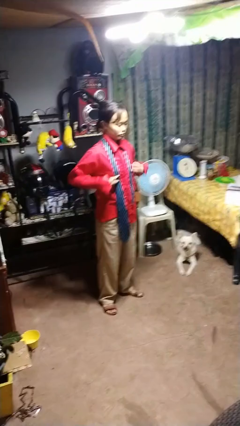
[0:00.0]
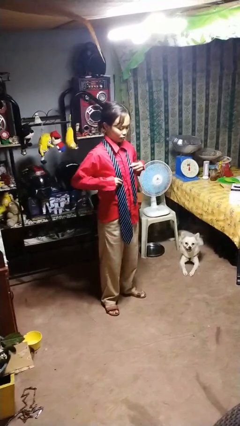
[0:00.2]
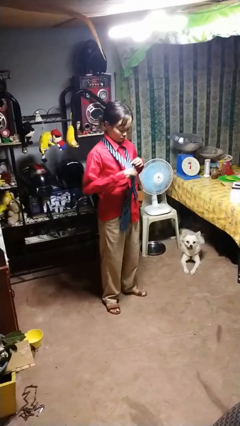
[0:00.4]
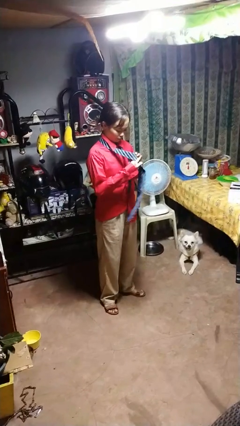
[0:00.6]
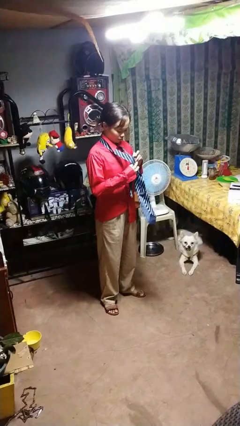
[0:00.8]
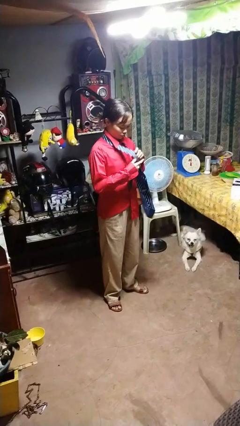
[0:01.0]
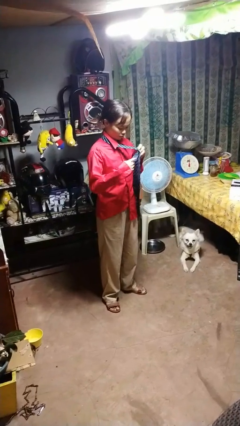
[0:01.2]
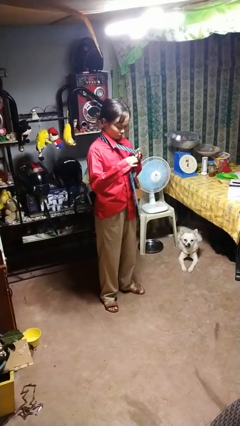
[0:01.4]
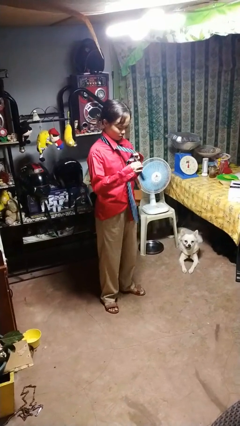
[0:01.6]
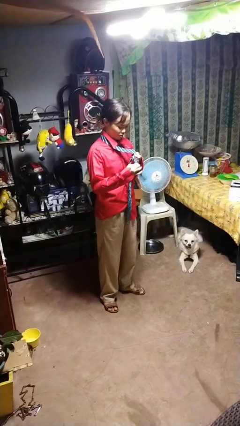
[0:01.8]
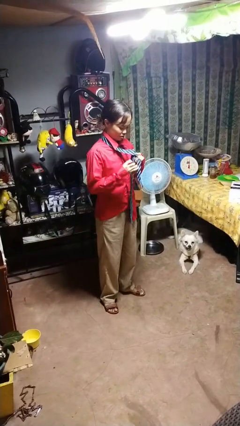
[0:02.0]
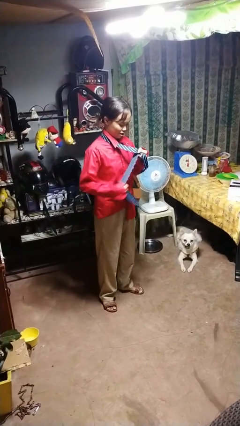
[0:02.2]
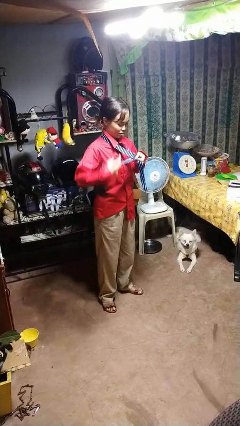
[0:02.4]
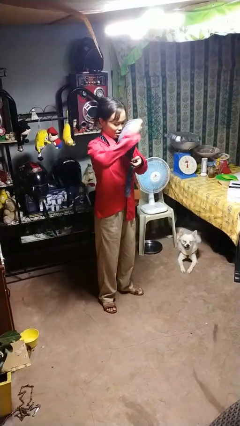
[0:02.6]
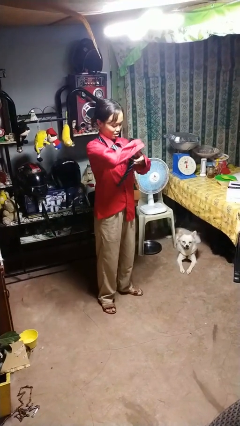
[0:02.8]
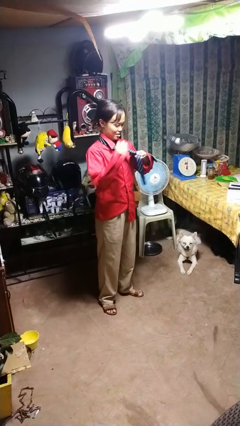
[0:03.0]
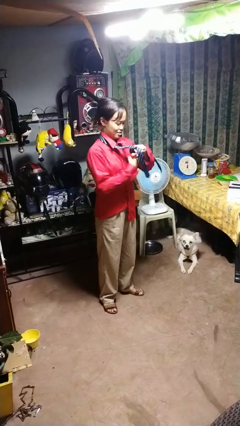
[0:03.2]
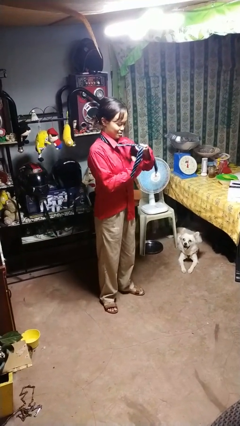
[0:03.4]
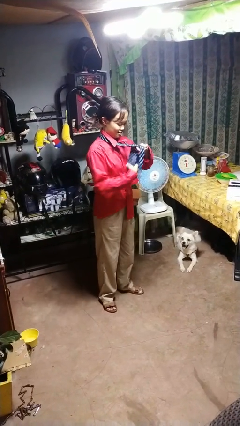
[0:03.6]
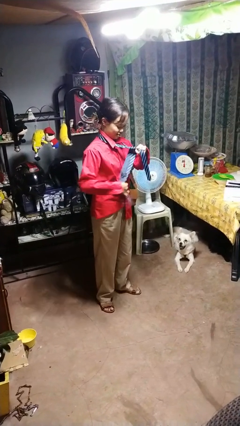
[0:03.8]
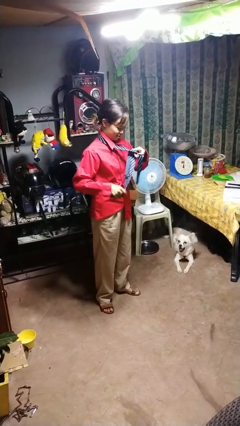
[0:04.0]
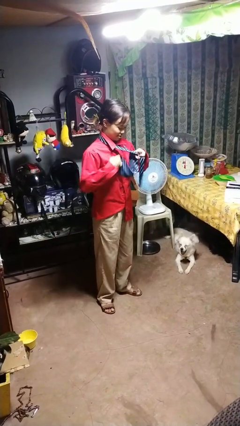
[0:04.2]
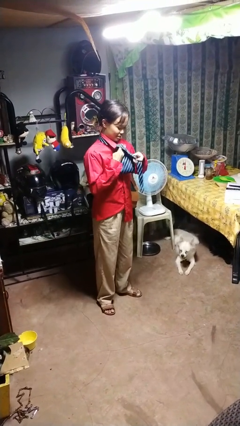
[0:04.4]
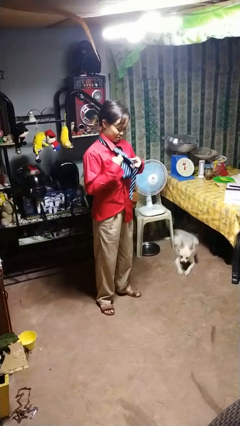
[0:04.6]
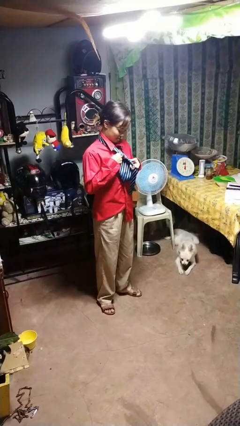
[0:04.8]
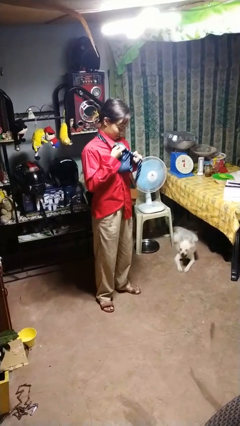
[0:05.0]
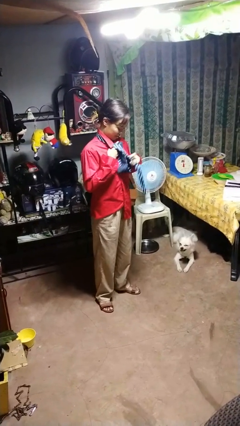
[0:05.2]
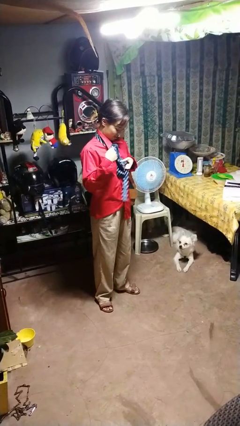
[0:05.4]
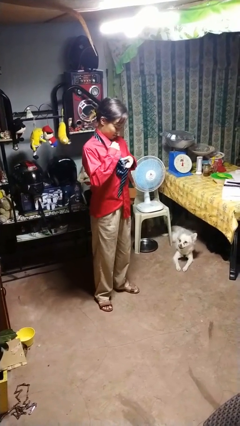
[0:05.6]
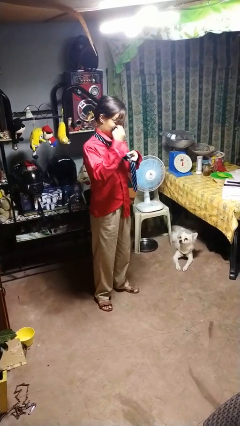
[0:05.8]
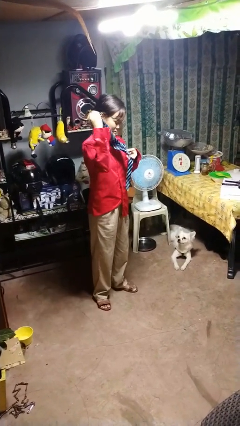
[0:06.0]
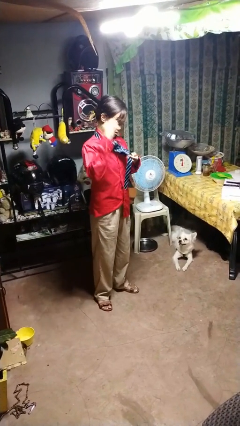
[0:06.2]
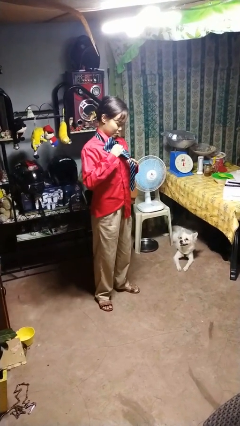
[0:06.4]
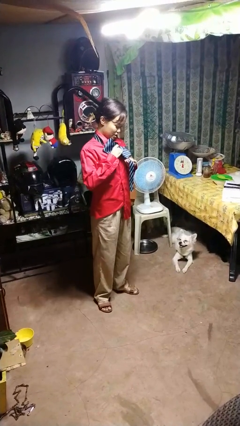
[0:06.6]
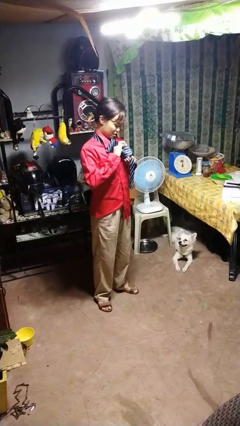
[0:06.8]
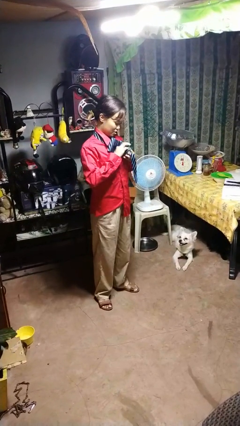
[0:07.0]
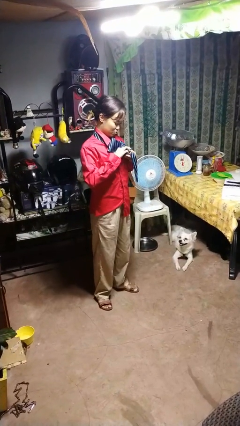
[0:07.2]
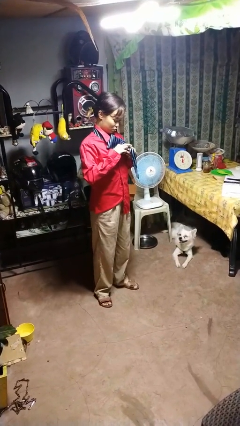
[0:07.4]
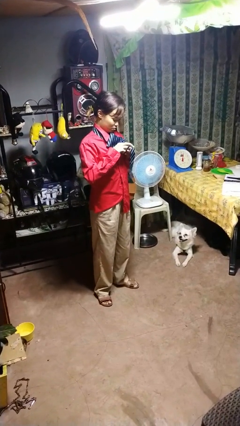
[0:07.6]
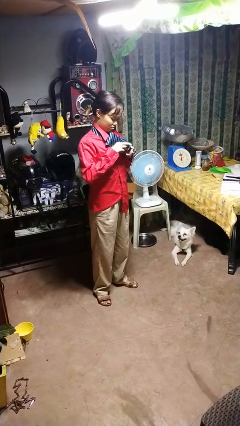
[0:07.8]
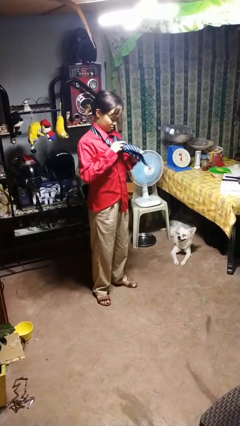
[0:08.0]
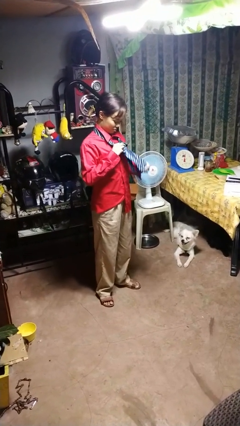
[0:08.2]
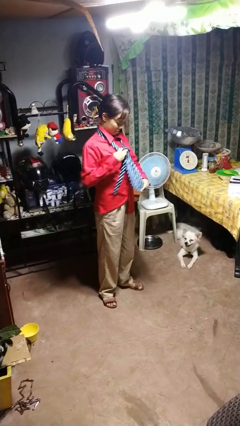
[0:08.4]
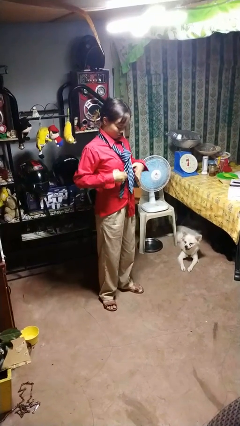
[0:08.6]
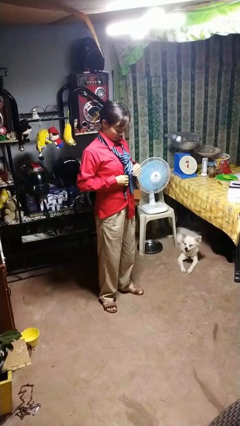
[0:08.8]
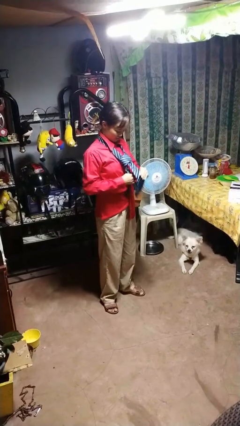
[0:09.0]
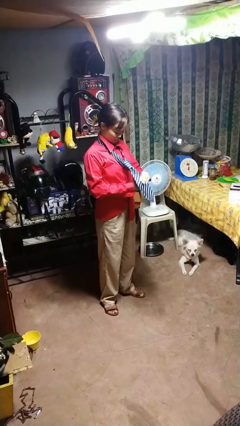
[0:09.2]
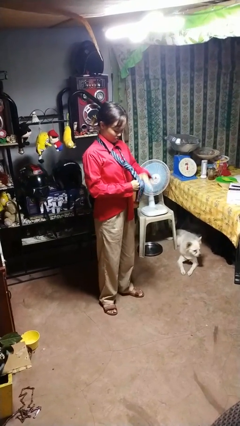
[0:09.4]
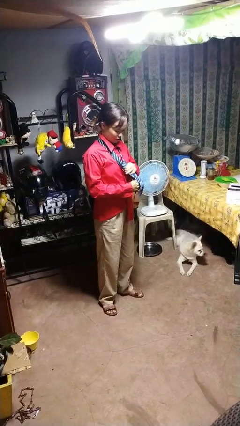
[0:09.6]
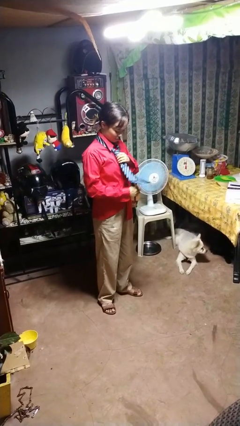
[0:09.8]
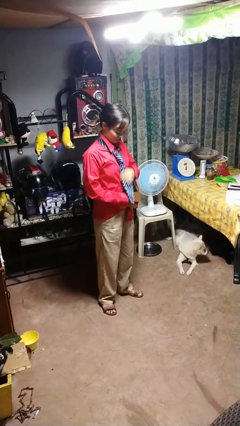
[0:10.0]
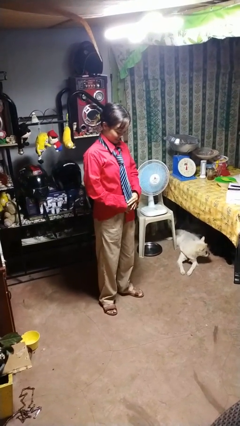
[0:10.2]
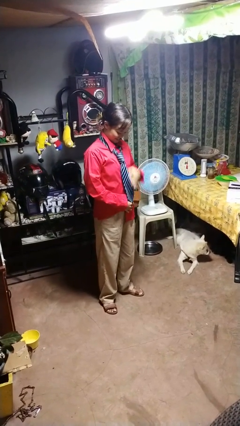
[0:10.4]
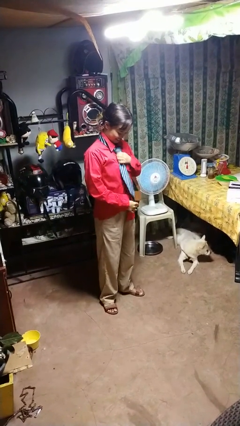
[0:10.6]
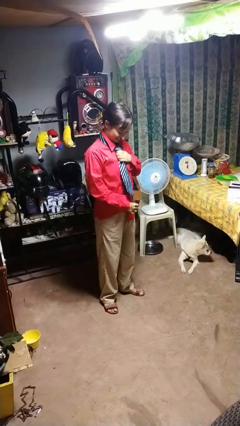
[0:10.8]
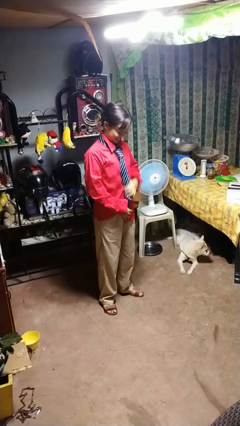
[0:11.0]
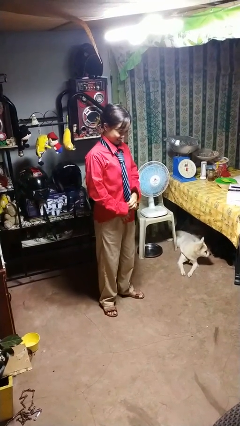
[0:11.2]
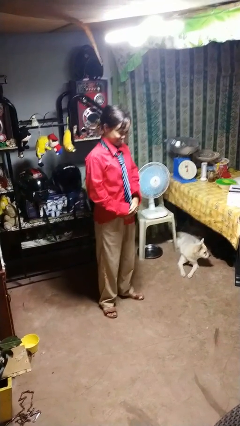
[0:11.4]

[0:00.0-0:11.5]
person puts on necktie

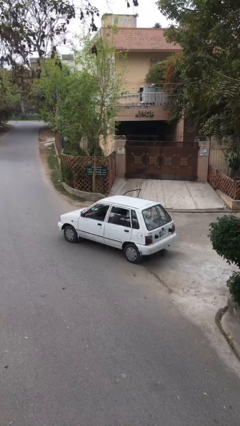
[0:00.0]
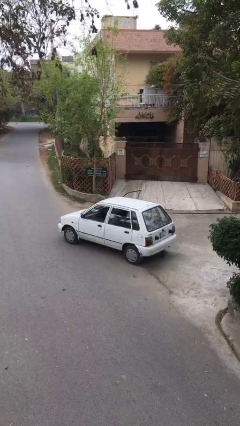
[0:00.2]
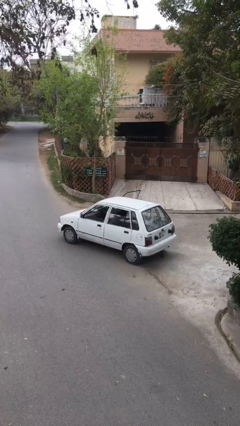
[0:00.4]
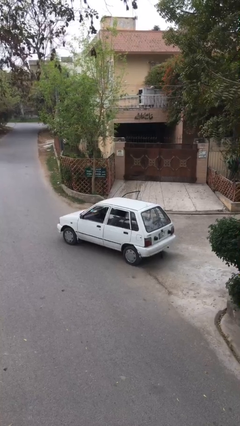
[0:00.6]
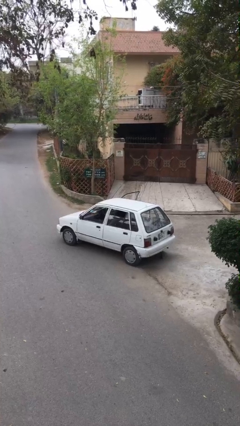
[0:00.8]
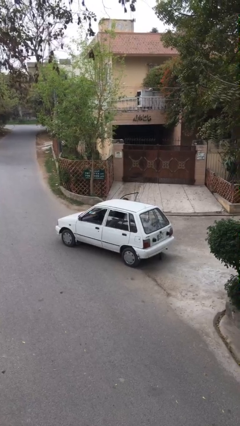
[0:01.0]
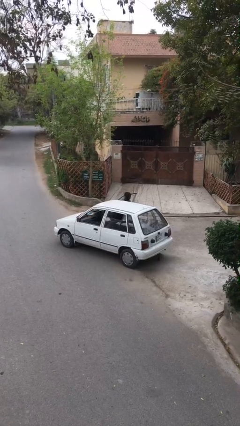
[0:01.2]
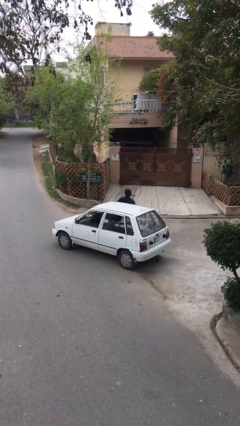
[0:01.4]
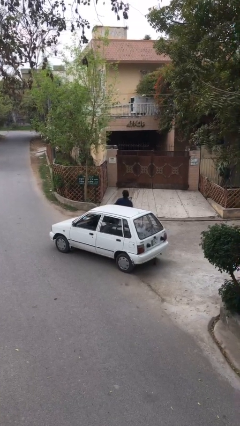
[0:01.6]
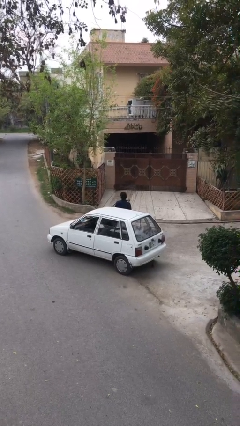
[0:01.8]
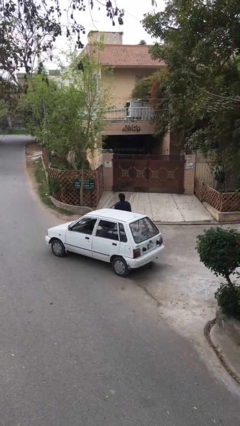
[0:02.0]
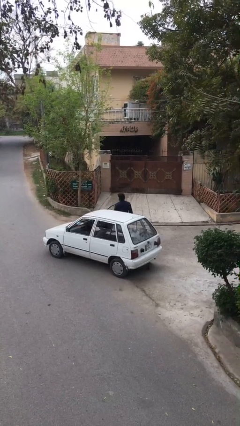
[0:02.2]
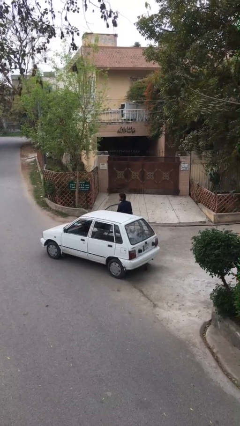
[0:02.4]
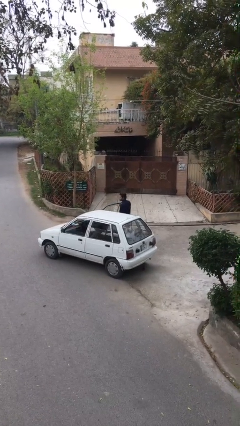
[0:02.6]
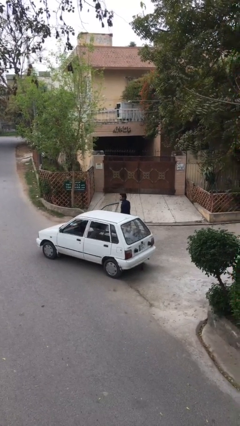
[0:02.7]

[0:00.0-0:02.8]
person exits car

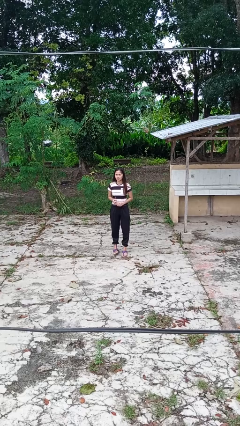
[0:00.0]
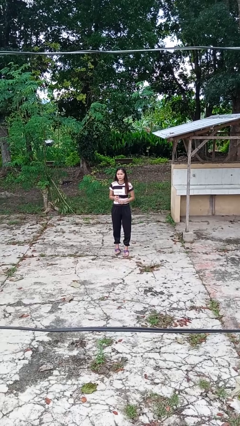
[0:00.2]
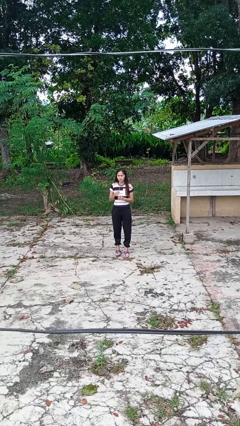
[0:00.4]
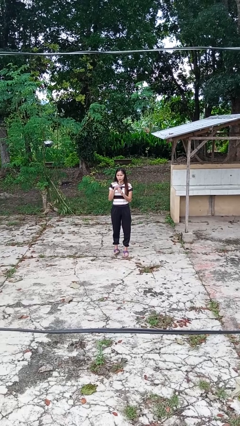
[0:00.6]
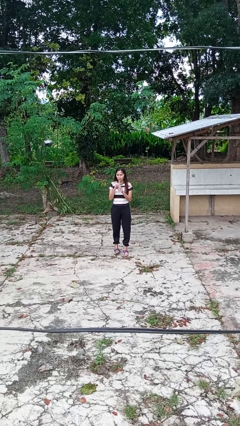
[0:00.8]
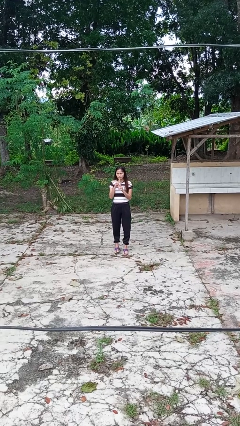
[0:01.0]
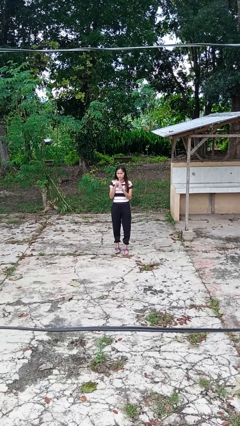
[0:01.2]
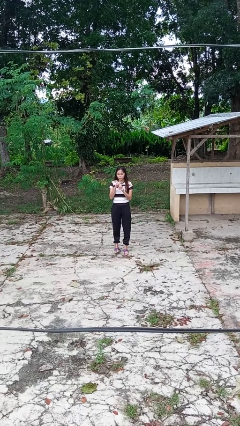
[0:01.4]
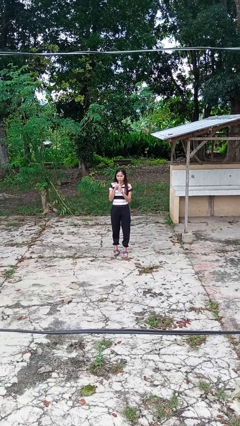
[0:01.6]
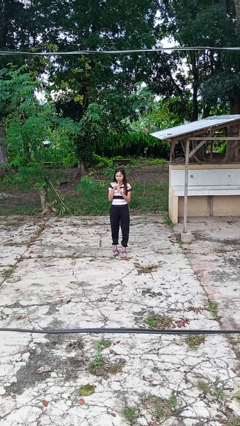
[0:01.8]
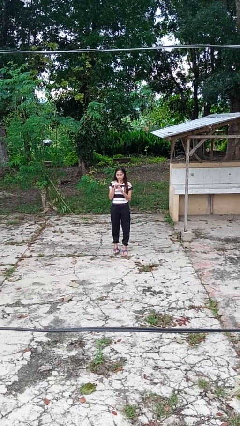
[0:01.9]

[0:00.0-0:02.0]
person drinks from straw

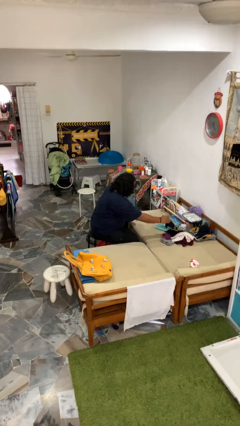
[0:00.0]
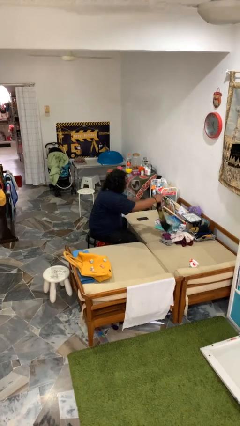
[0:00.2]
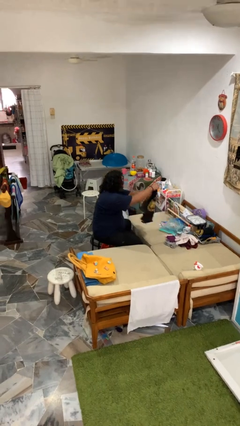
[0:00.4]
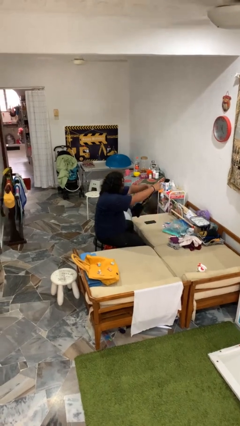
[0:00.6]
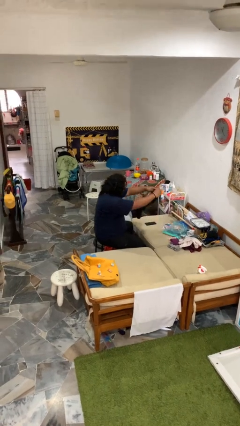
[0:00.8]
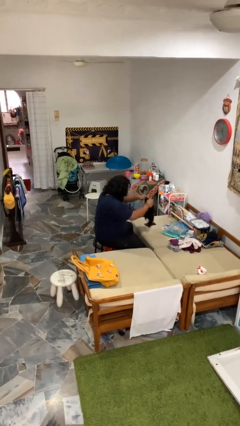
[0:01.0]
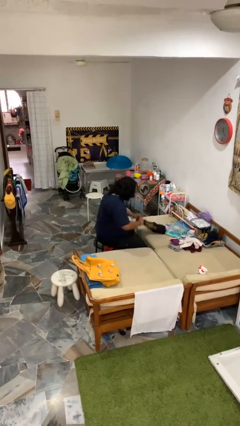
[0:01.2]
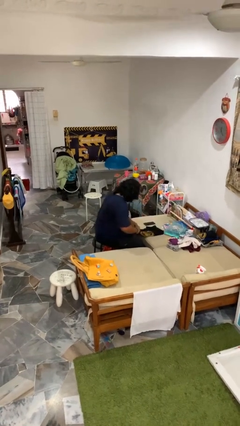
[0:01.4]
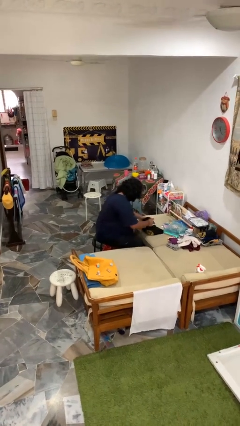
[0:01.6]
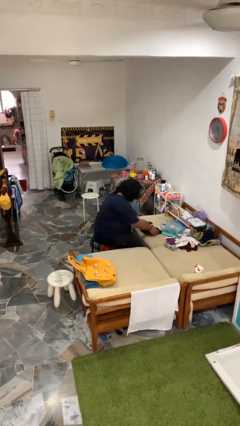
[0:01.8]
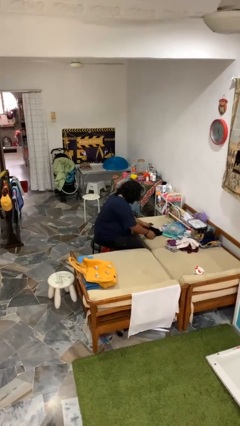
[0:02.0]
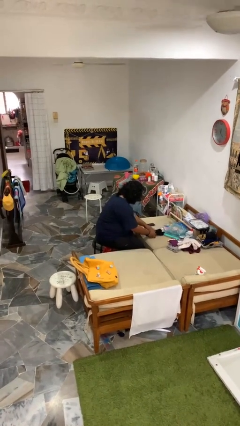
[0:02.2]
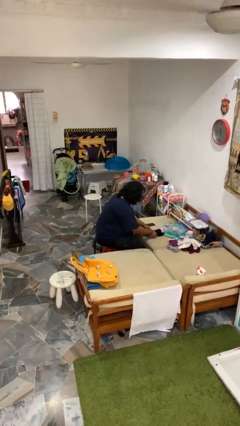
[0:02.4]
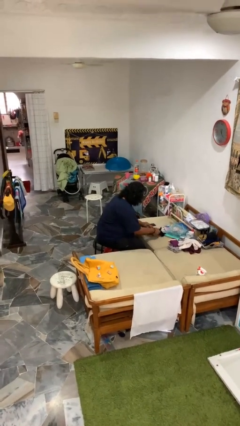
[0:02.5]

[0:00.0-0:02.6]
person folds shirt
